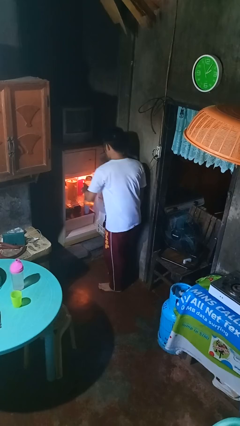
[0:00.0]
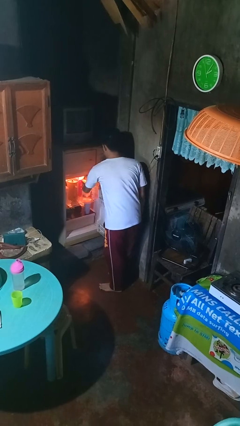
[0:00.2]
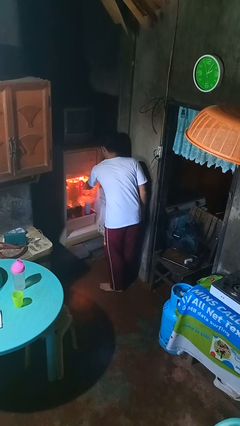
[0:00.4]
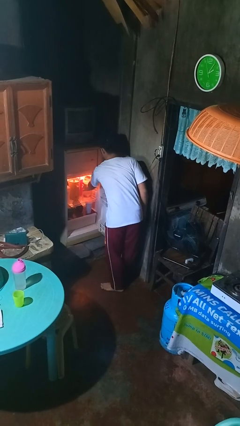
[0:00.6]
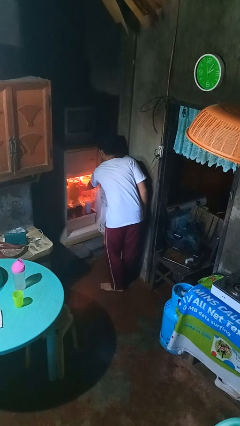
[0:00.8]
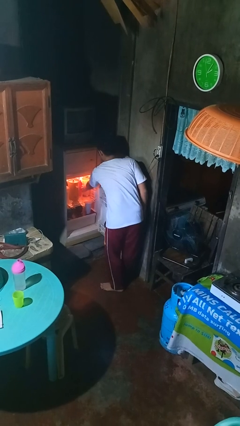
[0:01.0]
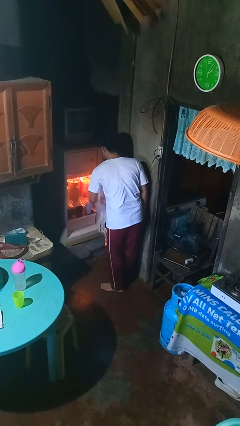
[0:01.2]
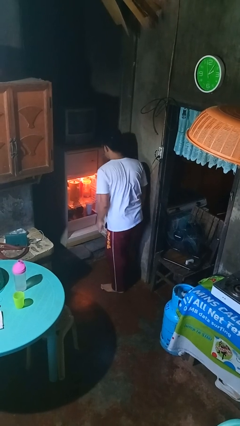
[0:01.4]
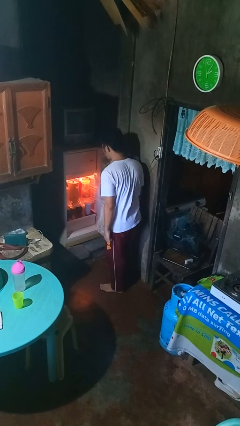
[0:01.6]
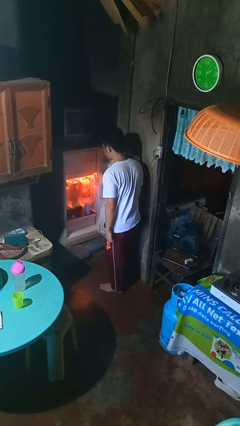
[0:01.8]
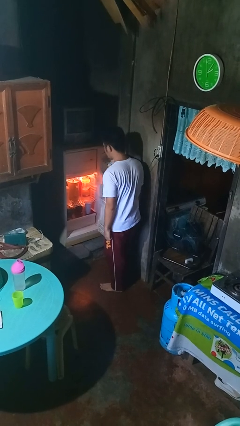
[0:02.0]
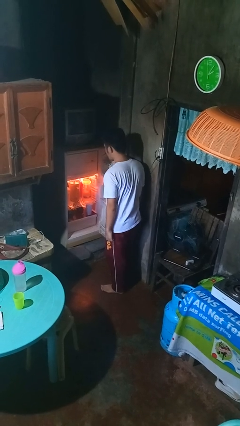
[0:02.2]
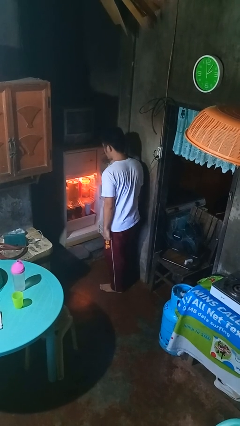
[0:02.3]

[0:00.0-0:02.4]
person puts object into refrigerator

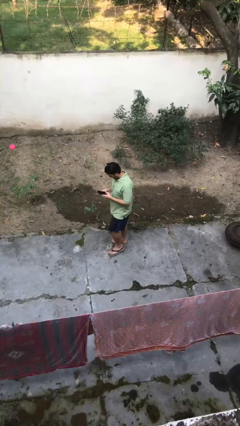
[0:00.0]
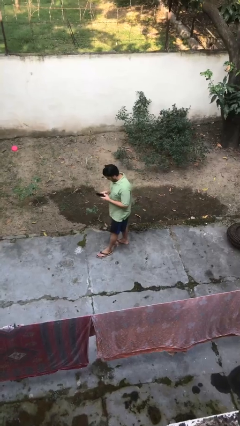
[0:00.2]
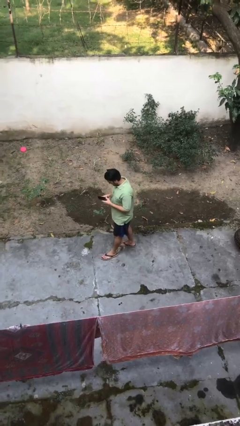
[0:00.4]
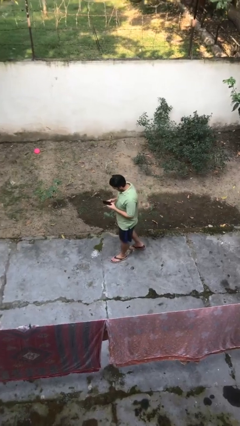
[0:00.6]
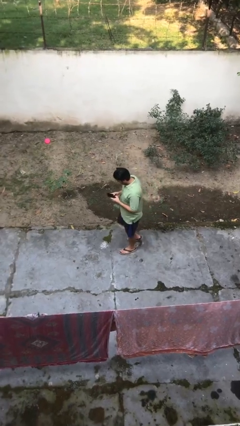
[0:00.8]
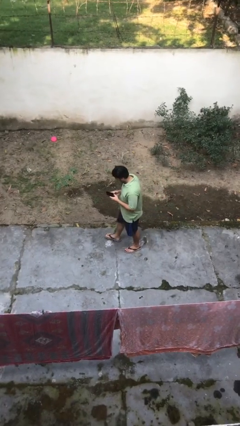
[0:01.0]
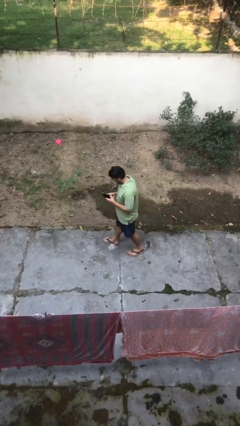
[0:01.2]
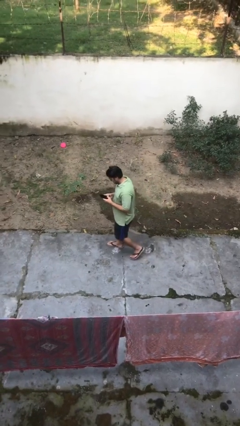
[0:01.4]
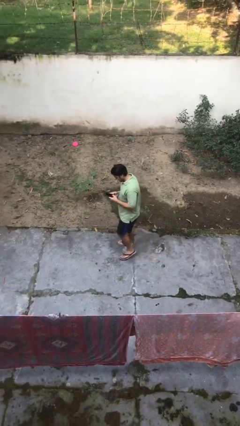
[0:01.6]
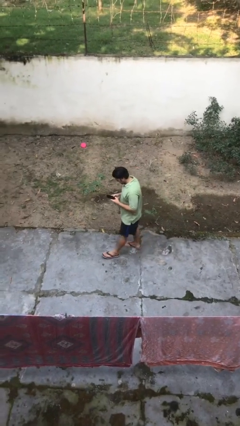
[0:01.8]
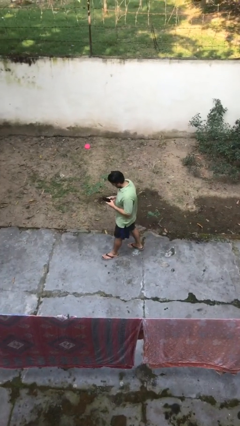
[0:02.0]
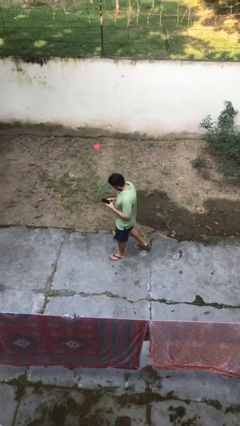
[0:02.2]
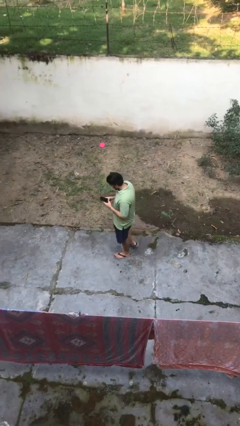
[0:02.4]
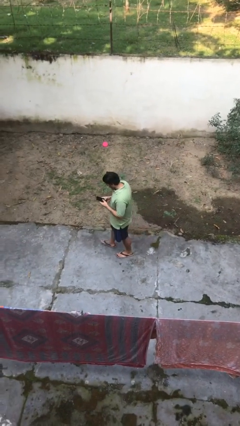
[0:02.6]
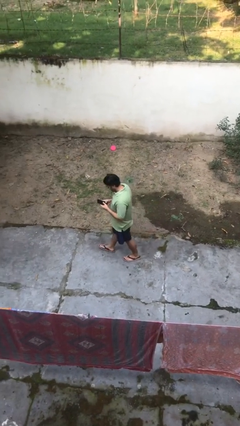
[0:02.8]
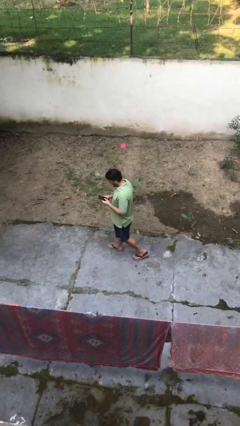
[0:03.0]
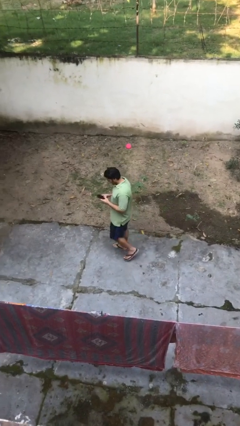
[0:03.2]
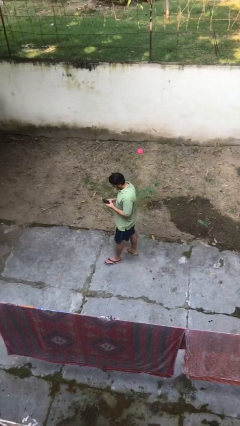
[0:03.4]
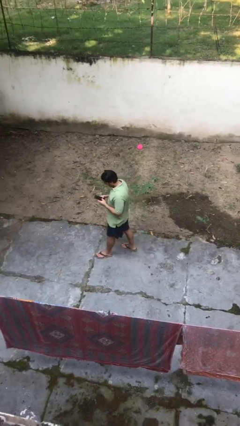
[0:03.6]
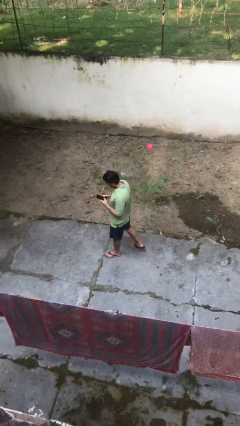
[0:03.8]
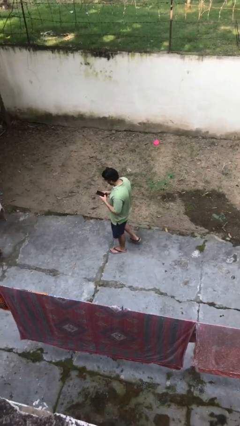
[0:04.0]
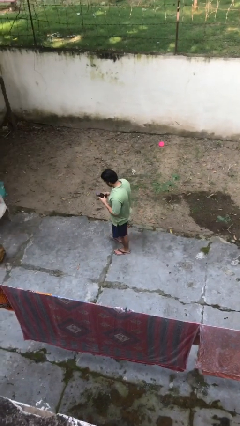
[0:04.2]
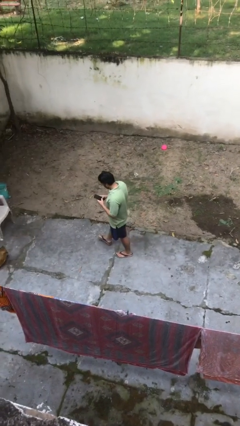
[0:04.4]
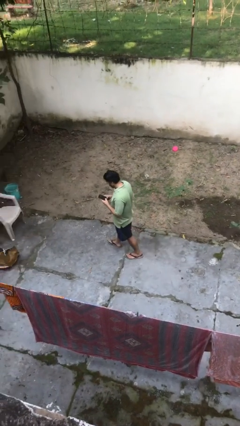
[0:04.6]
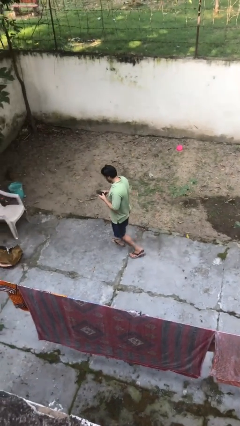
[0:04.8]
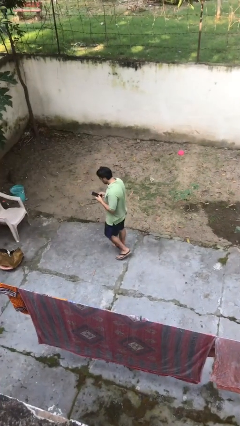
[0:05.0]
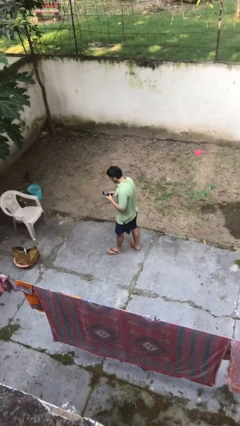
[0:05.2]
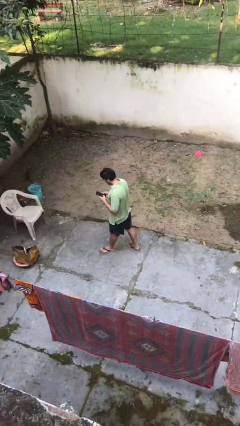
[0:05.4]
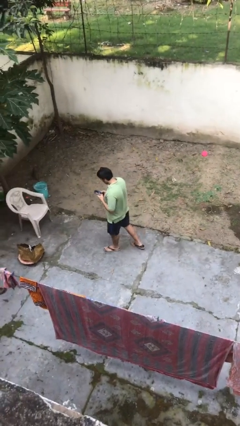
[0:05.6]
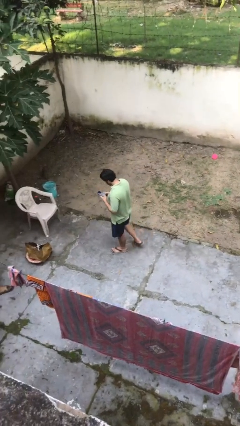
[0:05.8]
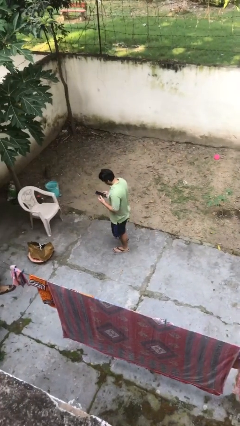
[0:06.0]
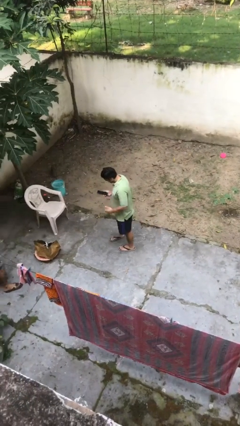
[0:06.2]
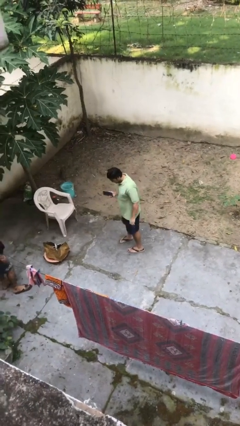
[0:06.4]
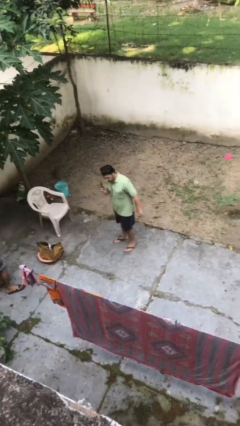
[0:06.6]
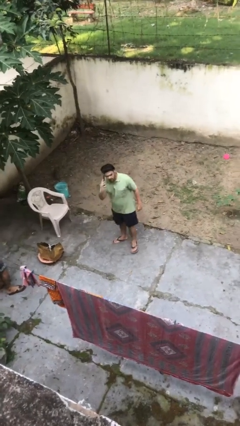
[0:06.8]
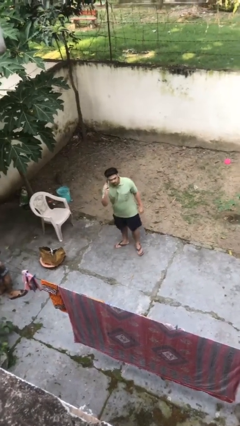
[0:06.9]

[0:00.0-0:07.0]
person texts on phone

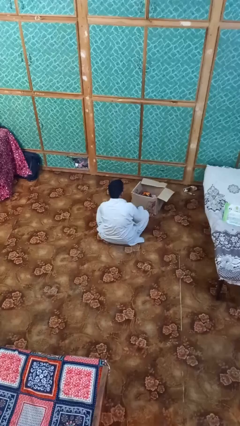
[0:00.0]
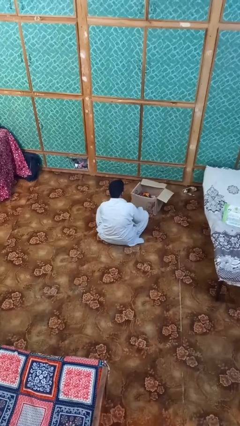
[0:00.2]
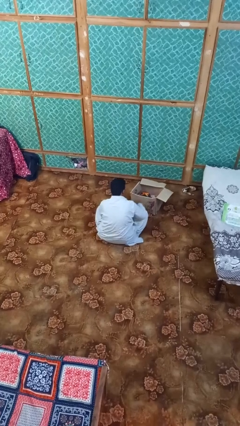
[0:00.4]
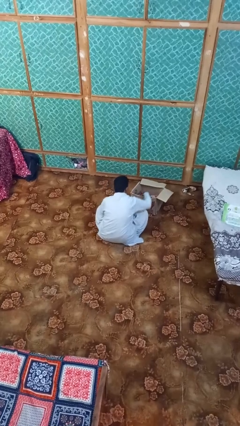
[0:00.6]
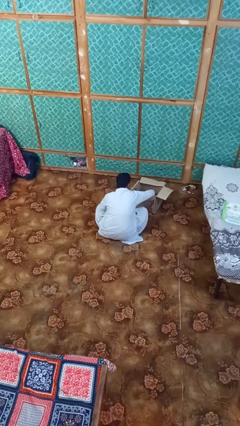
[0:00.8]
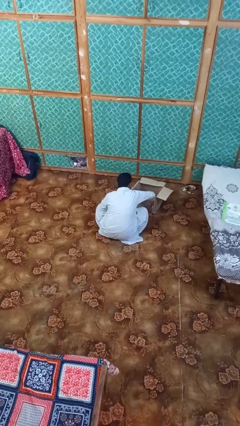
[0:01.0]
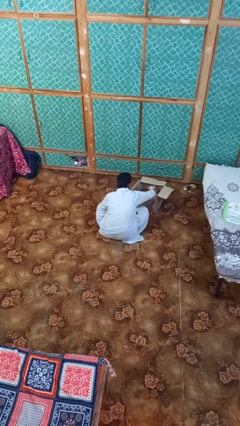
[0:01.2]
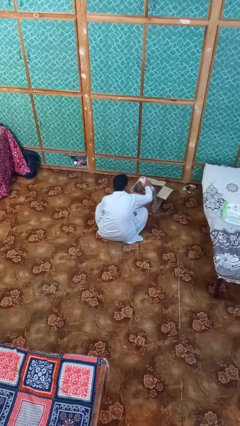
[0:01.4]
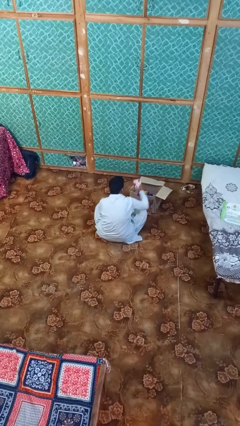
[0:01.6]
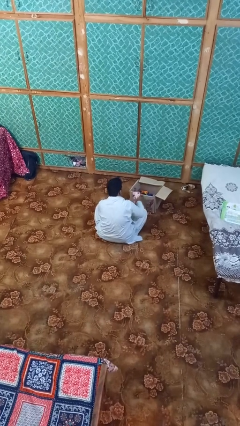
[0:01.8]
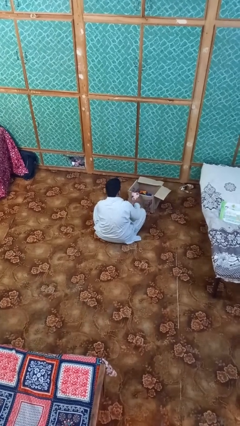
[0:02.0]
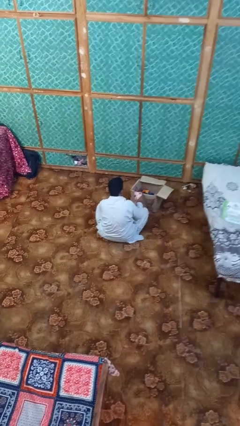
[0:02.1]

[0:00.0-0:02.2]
person takes object from box

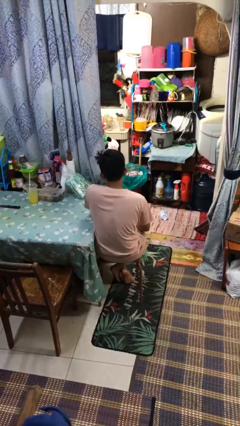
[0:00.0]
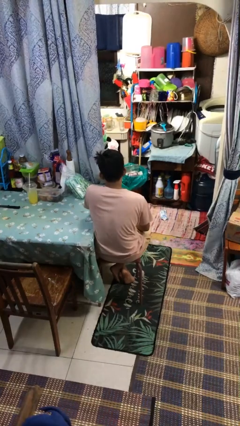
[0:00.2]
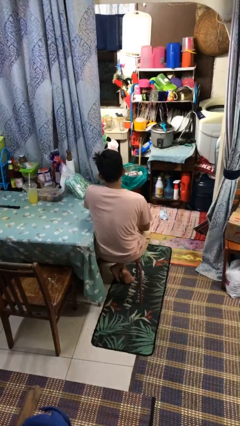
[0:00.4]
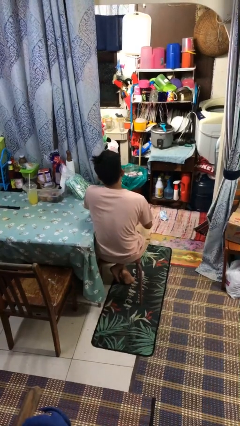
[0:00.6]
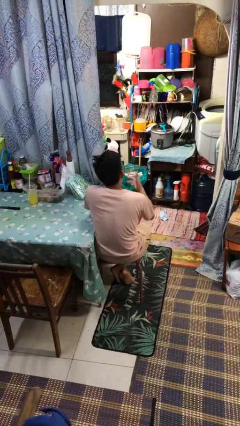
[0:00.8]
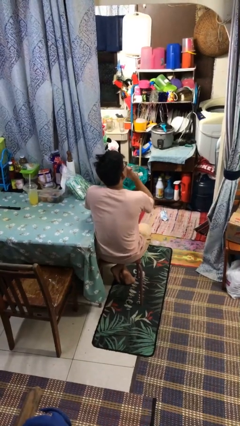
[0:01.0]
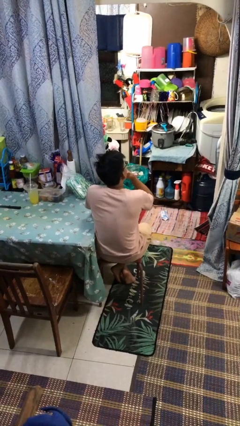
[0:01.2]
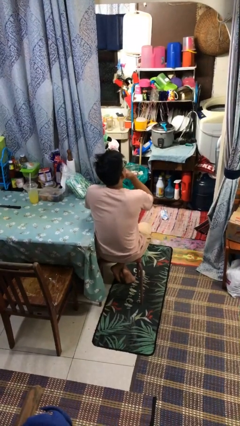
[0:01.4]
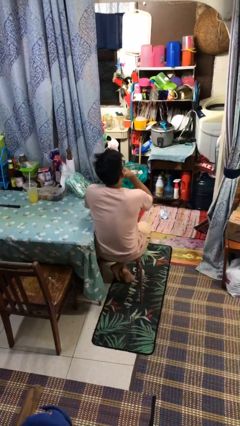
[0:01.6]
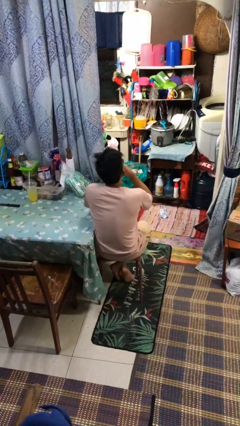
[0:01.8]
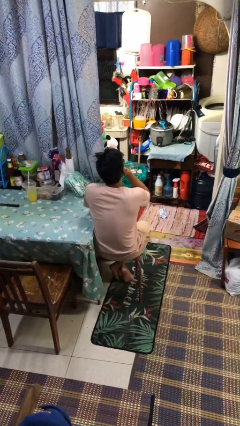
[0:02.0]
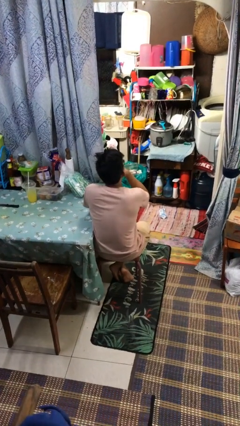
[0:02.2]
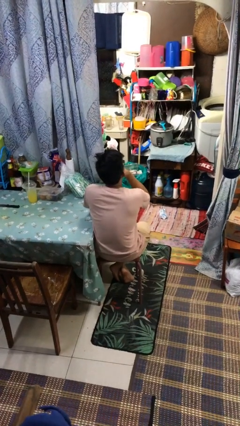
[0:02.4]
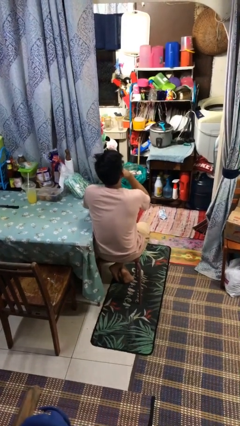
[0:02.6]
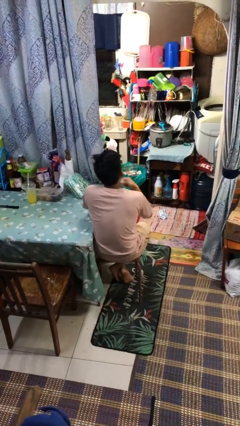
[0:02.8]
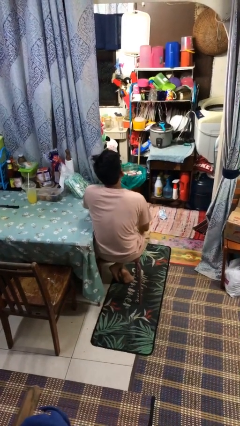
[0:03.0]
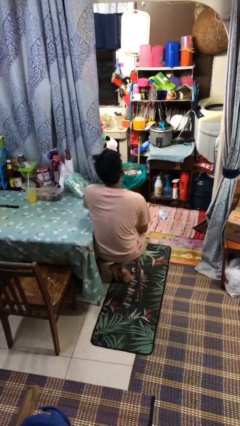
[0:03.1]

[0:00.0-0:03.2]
person strokes chin

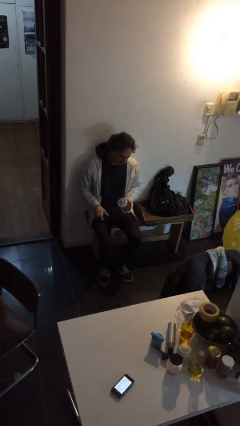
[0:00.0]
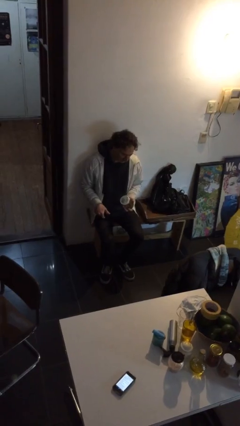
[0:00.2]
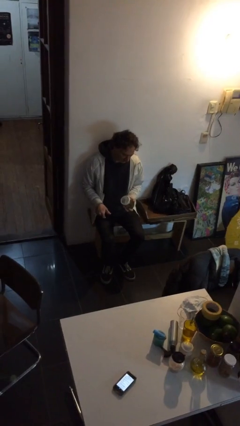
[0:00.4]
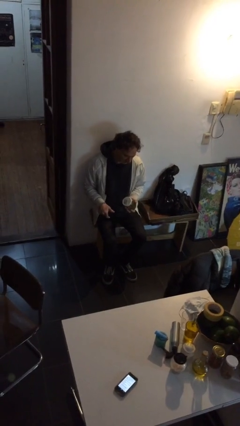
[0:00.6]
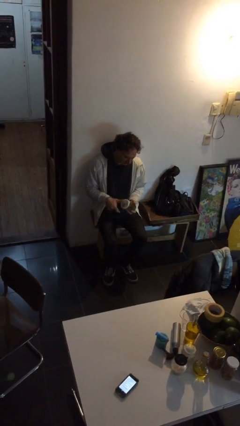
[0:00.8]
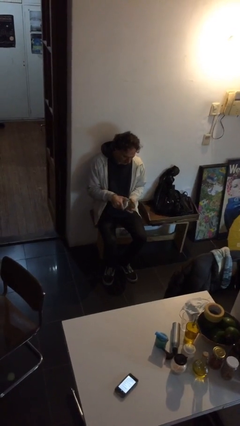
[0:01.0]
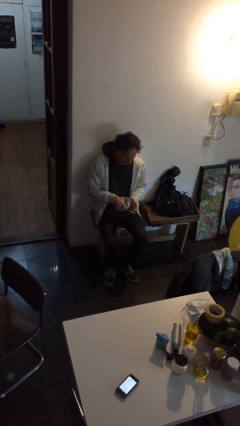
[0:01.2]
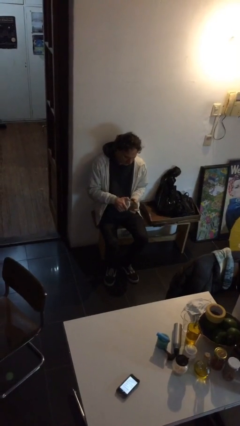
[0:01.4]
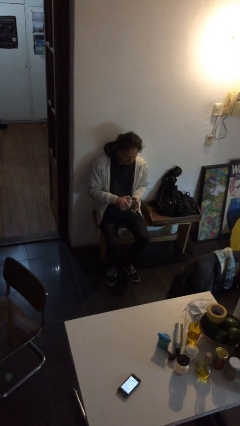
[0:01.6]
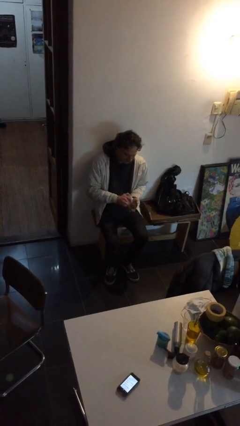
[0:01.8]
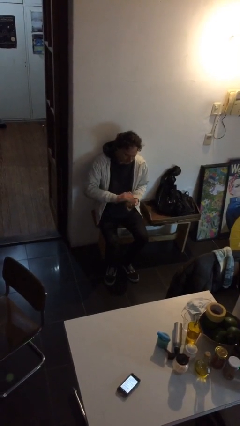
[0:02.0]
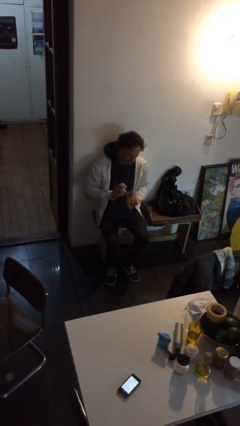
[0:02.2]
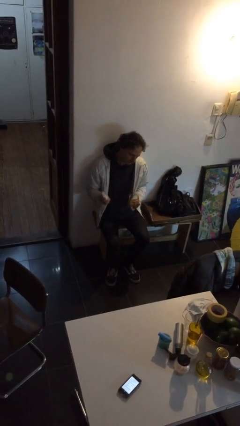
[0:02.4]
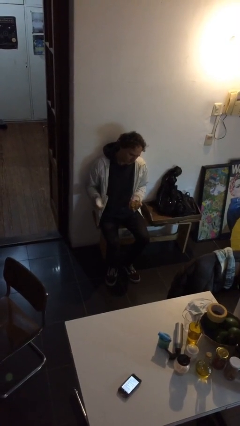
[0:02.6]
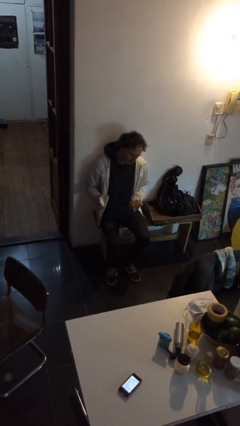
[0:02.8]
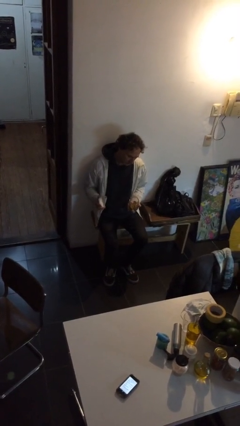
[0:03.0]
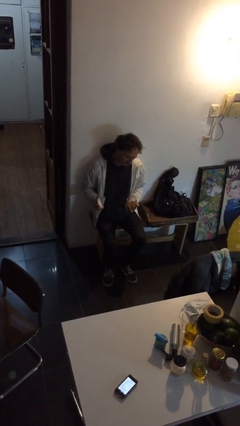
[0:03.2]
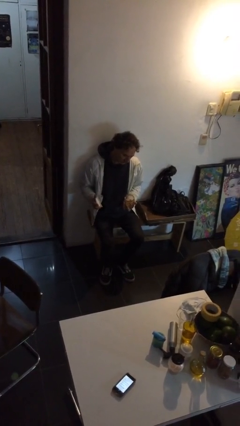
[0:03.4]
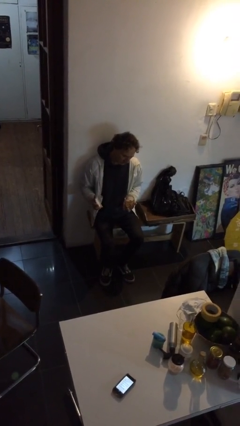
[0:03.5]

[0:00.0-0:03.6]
person opens jar
